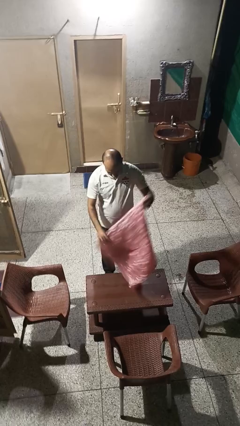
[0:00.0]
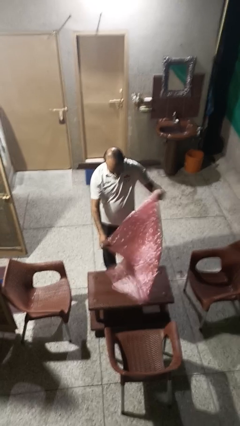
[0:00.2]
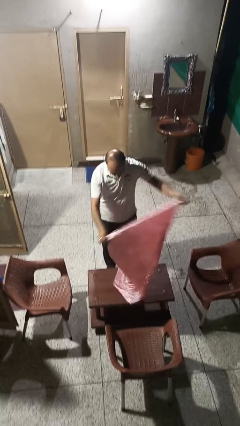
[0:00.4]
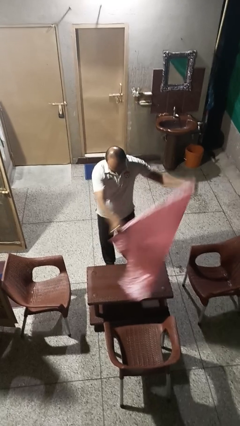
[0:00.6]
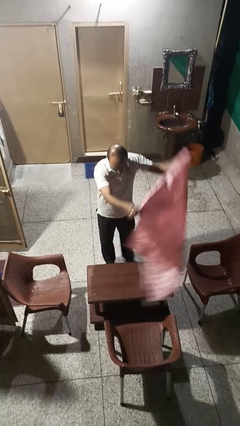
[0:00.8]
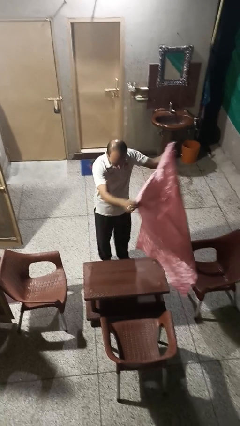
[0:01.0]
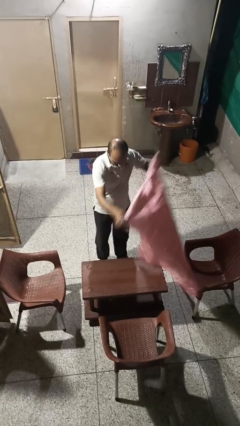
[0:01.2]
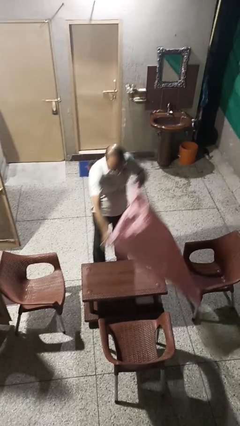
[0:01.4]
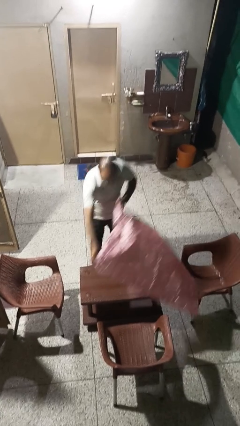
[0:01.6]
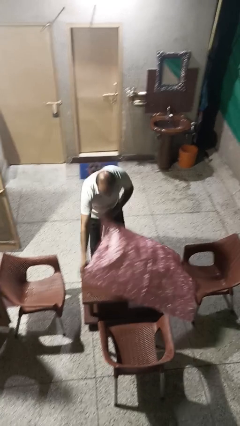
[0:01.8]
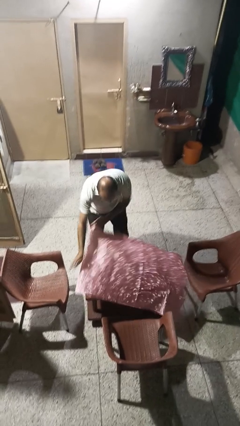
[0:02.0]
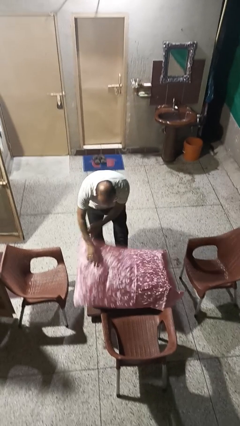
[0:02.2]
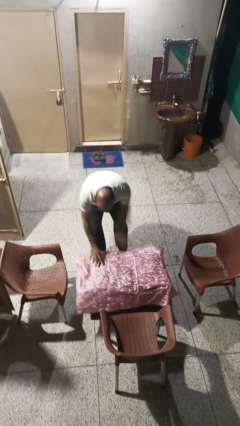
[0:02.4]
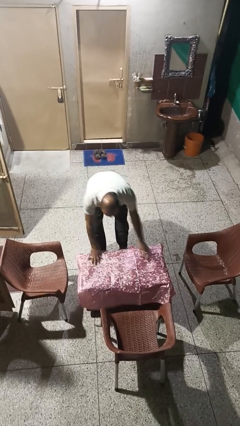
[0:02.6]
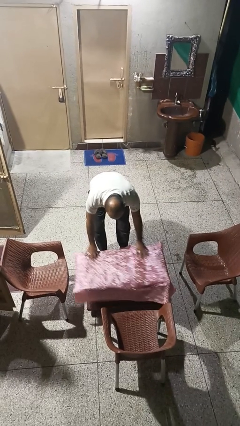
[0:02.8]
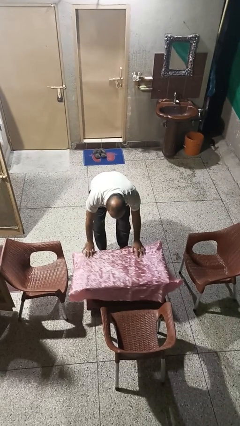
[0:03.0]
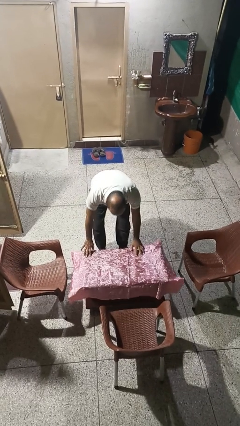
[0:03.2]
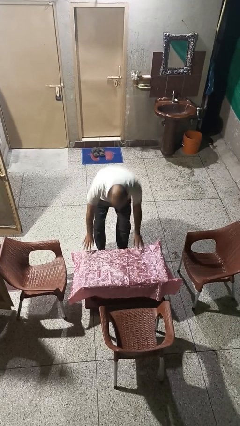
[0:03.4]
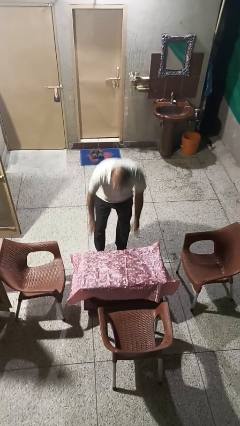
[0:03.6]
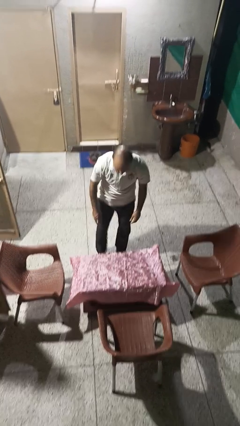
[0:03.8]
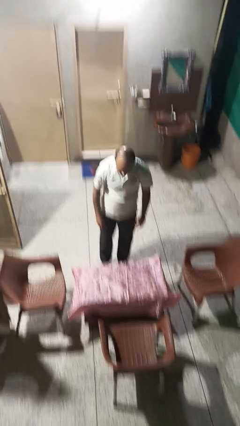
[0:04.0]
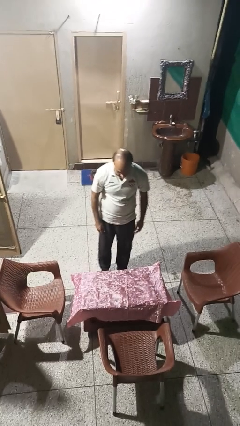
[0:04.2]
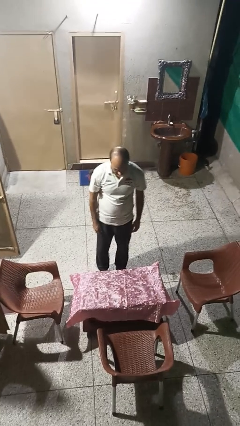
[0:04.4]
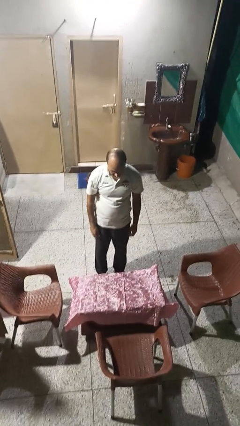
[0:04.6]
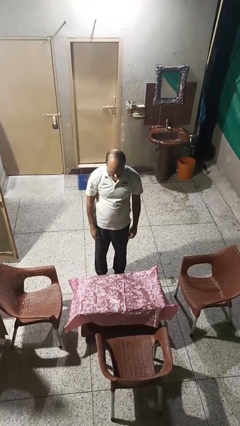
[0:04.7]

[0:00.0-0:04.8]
person spreads tablecloth

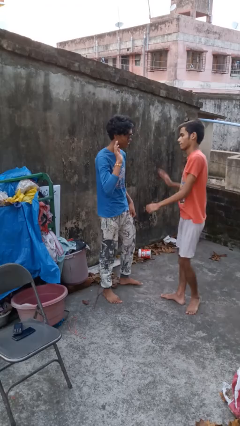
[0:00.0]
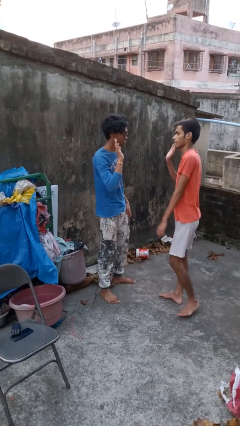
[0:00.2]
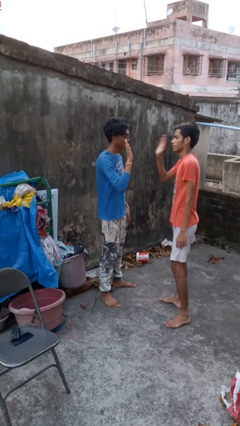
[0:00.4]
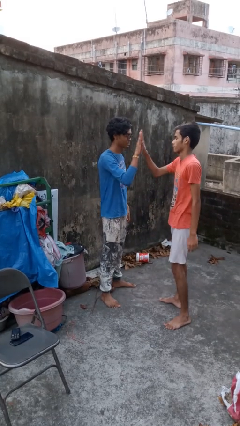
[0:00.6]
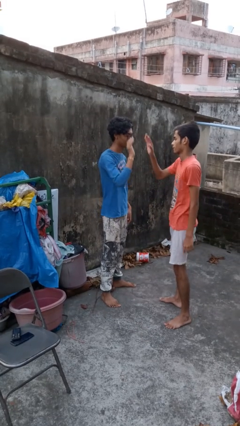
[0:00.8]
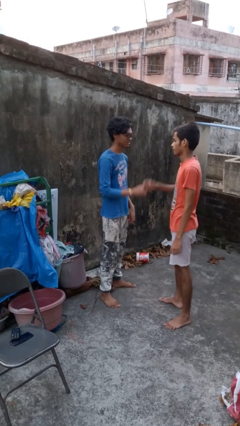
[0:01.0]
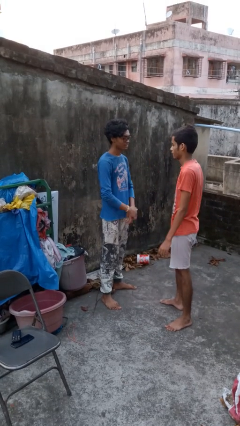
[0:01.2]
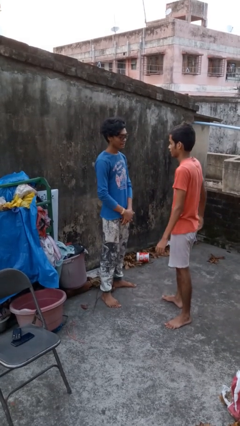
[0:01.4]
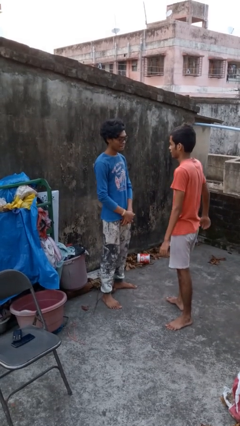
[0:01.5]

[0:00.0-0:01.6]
person highfives hand

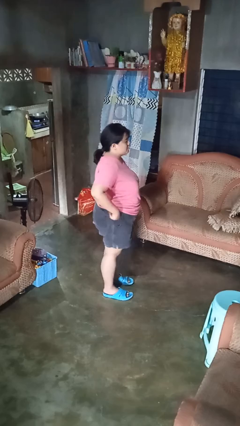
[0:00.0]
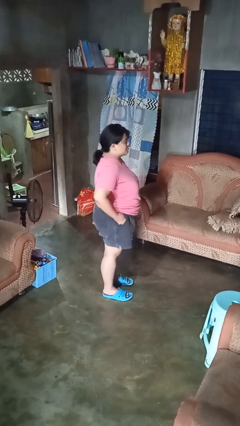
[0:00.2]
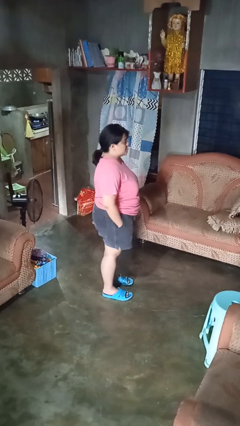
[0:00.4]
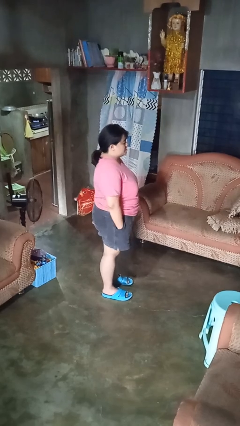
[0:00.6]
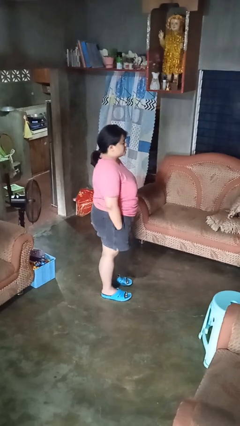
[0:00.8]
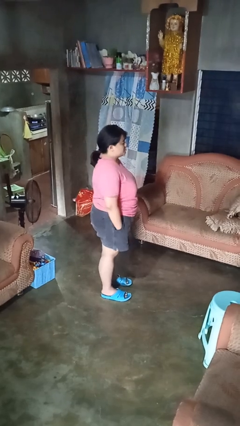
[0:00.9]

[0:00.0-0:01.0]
person puts hands in back pockets

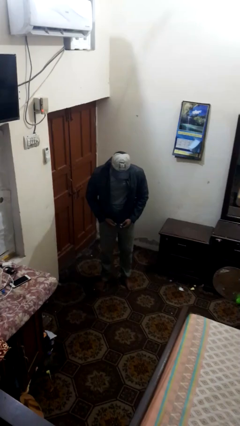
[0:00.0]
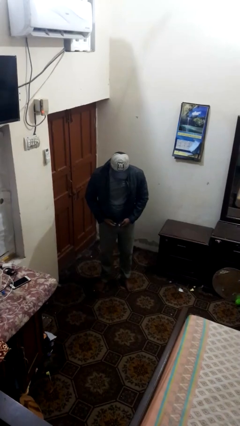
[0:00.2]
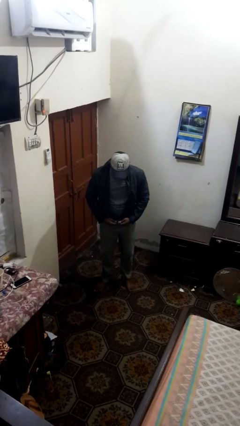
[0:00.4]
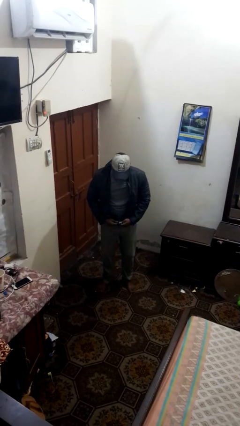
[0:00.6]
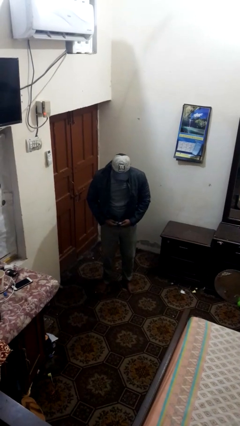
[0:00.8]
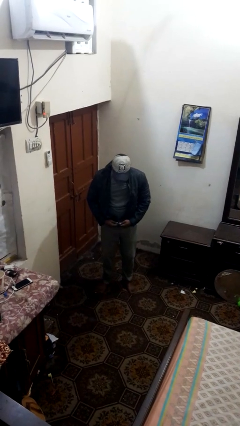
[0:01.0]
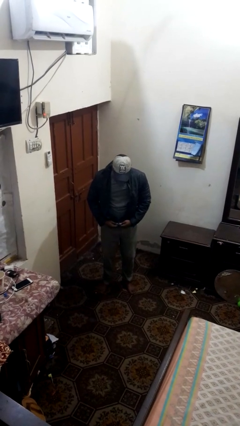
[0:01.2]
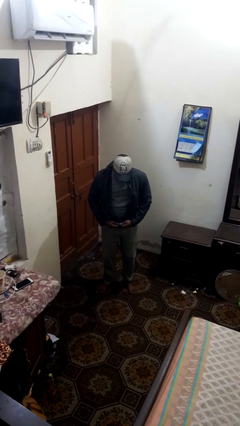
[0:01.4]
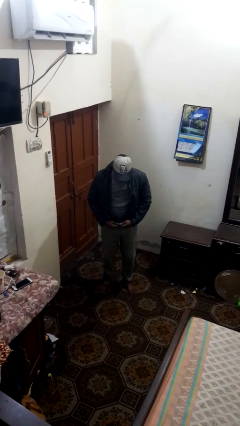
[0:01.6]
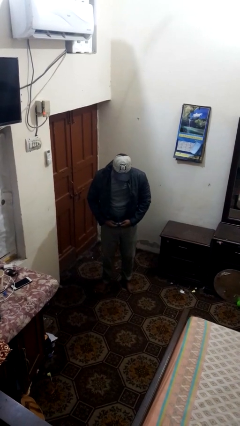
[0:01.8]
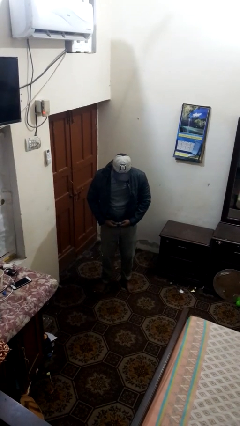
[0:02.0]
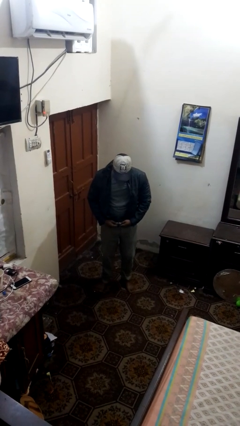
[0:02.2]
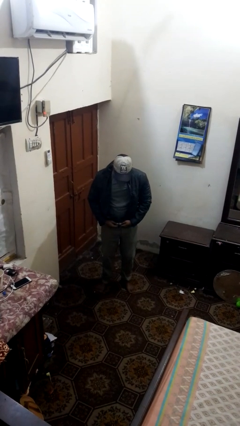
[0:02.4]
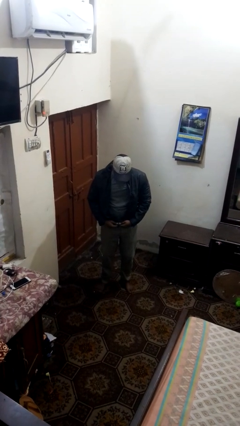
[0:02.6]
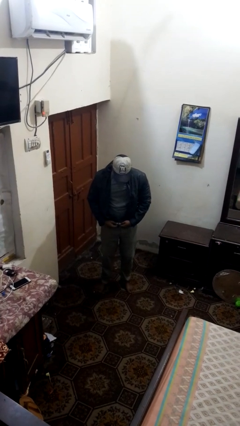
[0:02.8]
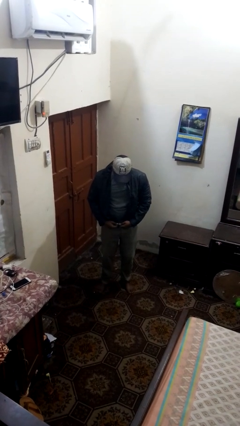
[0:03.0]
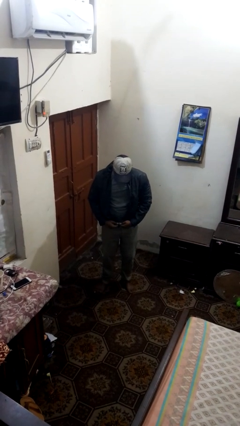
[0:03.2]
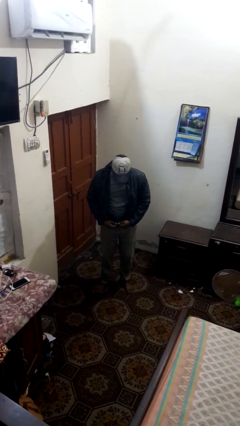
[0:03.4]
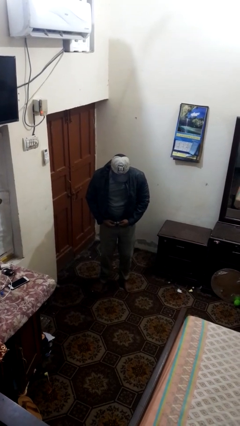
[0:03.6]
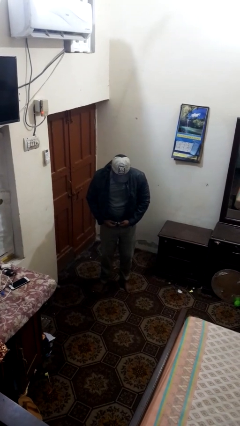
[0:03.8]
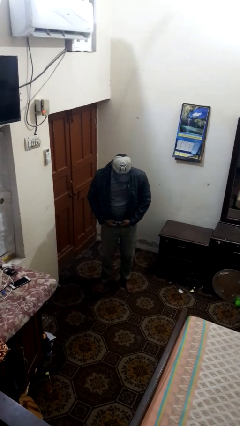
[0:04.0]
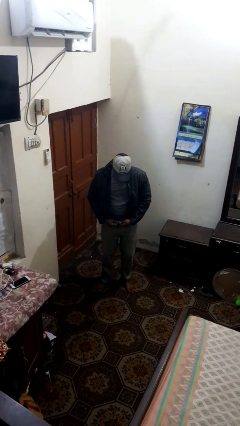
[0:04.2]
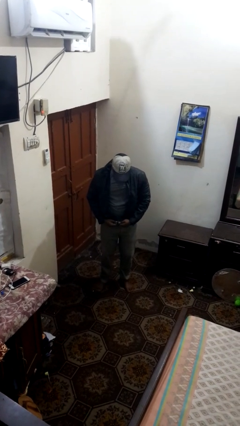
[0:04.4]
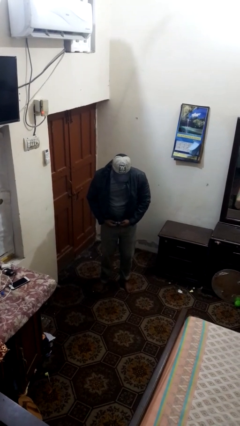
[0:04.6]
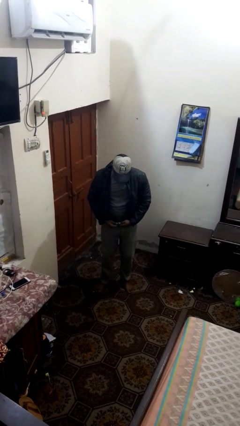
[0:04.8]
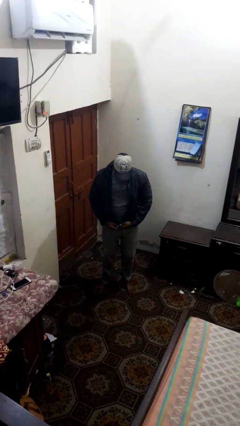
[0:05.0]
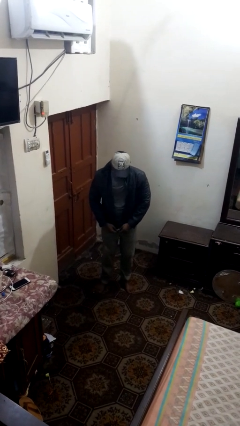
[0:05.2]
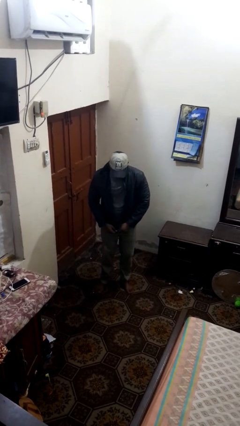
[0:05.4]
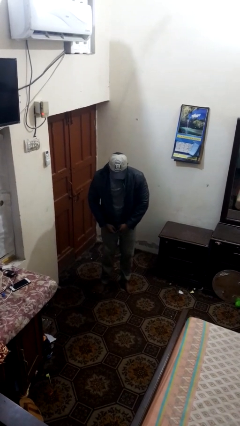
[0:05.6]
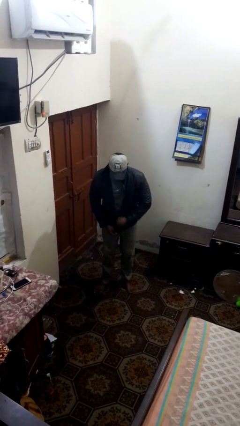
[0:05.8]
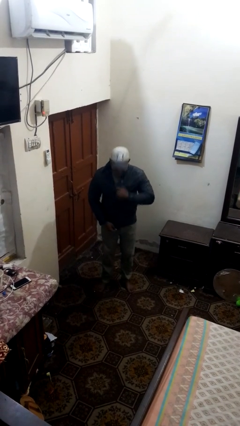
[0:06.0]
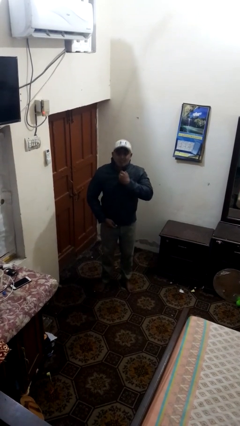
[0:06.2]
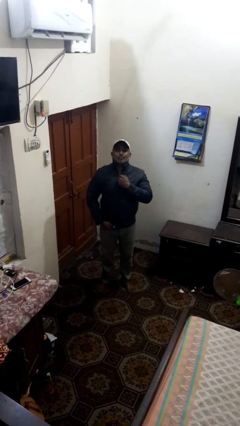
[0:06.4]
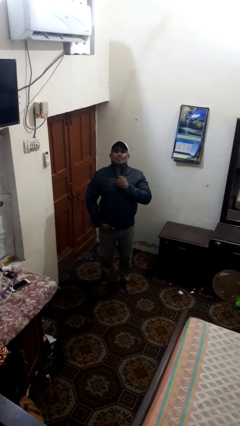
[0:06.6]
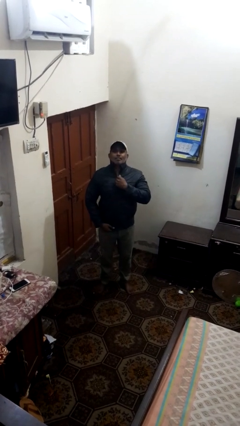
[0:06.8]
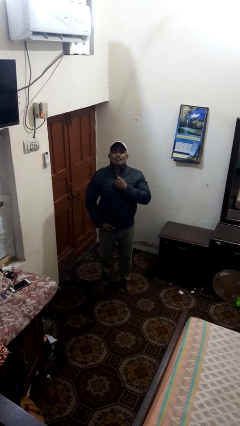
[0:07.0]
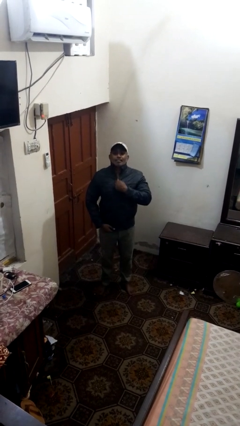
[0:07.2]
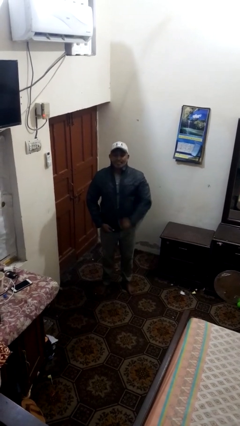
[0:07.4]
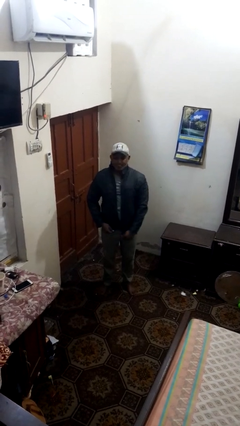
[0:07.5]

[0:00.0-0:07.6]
person zips up jacket

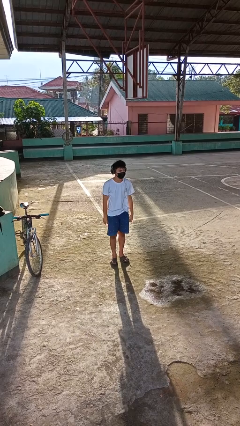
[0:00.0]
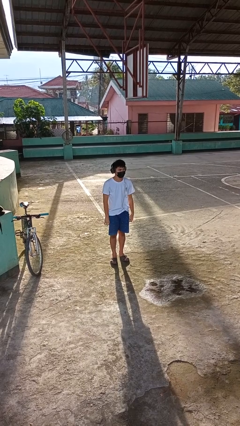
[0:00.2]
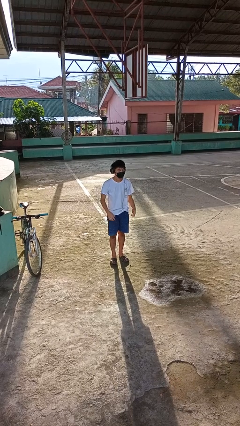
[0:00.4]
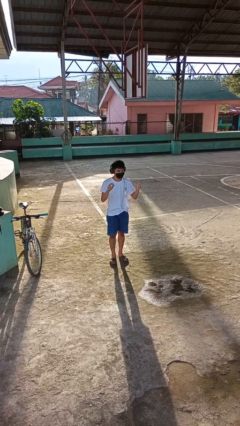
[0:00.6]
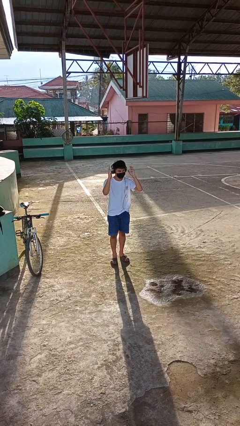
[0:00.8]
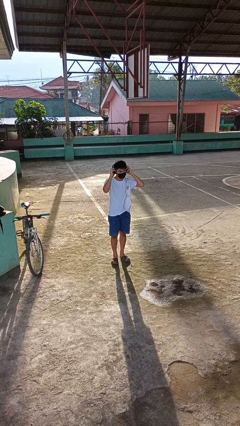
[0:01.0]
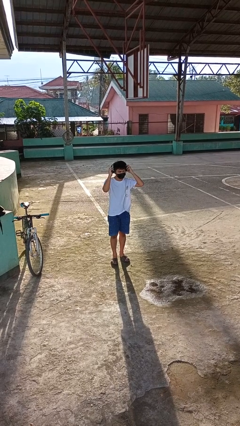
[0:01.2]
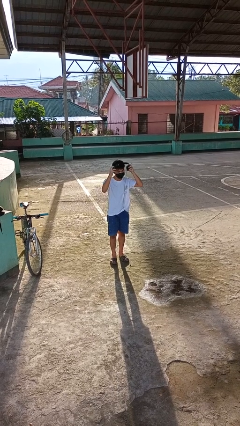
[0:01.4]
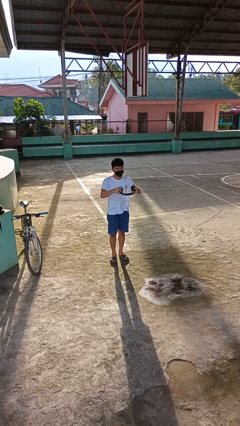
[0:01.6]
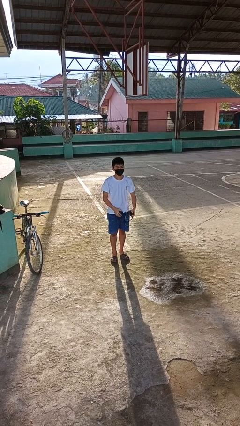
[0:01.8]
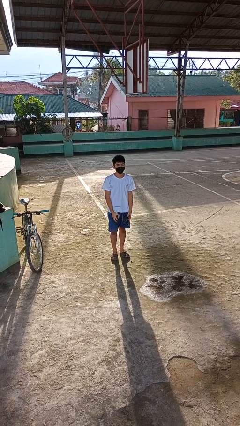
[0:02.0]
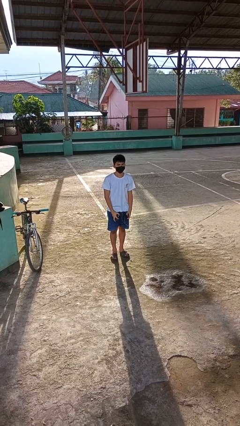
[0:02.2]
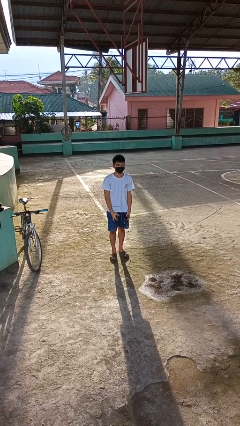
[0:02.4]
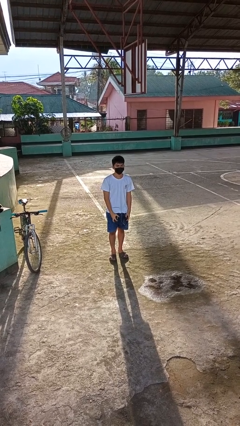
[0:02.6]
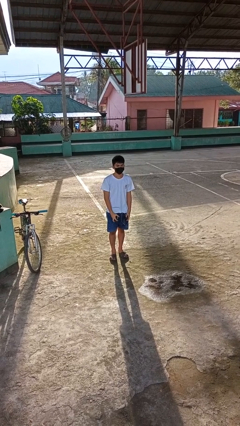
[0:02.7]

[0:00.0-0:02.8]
person takes off headphones
